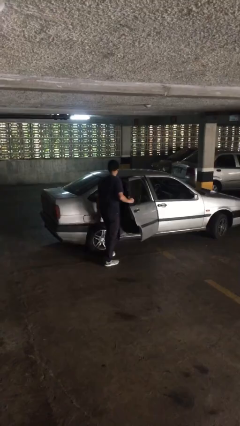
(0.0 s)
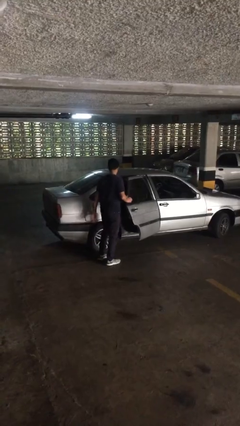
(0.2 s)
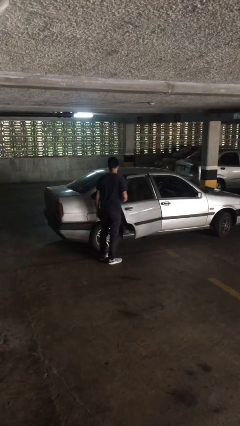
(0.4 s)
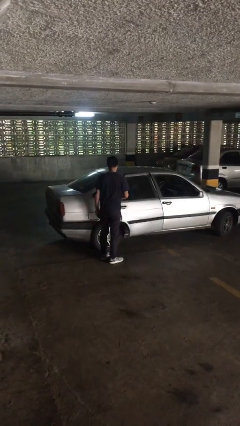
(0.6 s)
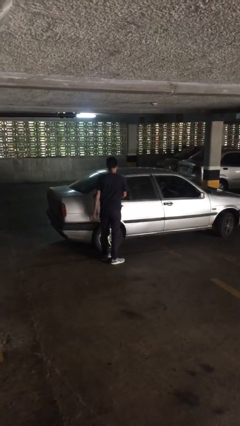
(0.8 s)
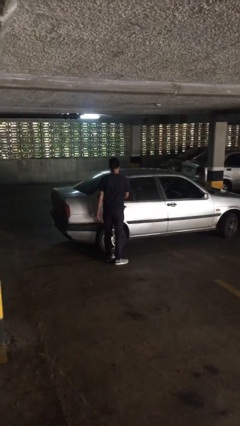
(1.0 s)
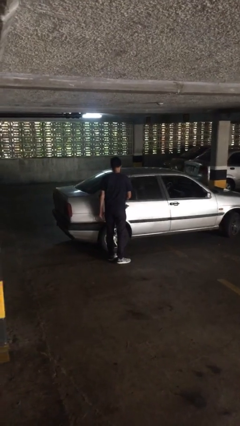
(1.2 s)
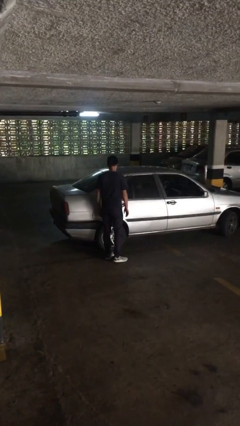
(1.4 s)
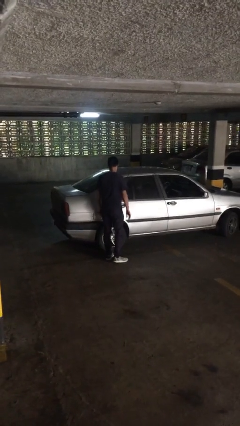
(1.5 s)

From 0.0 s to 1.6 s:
person closes car door

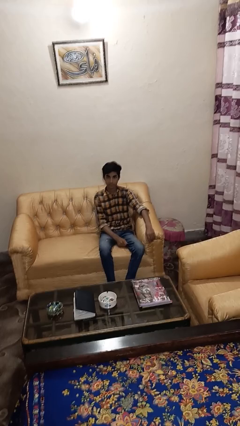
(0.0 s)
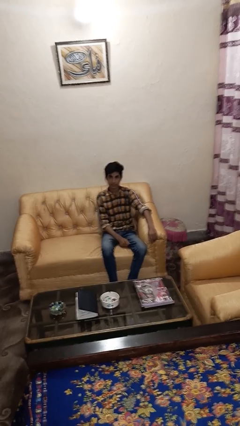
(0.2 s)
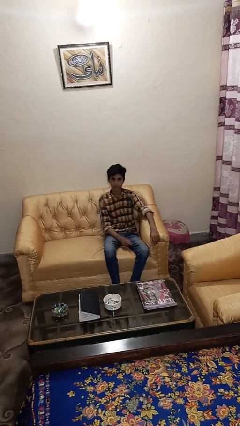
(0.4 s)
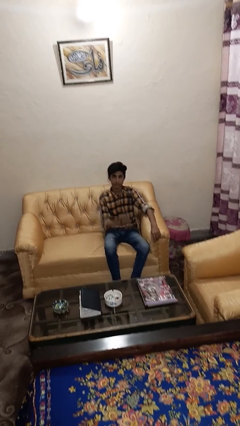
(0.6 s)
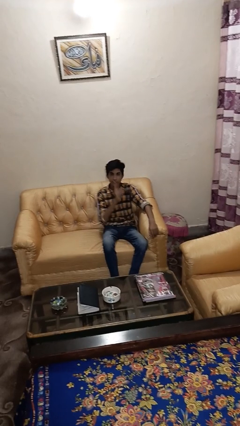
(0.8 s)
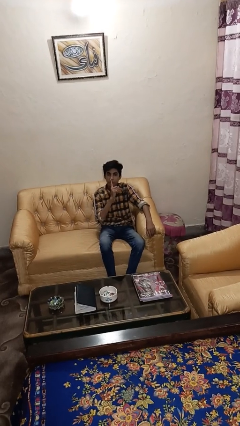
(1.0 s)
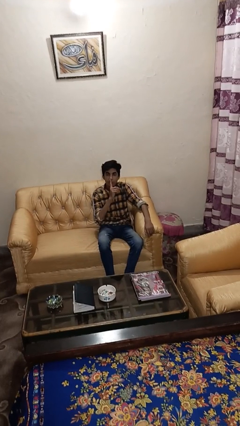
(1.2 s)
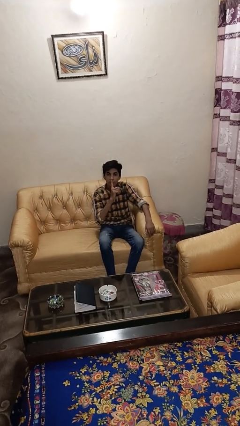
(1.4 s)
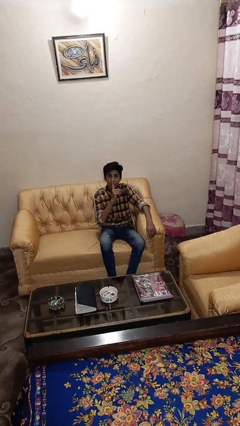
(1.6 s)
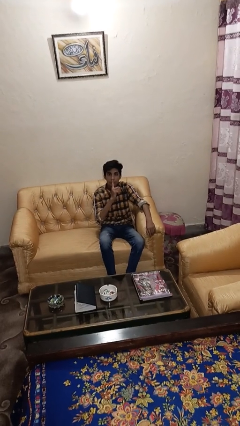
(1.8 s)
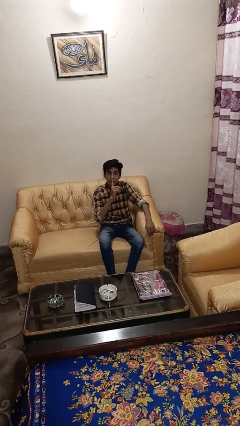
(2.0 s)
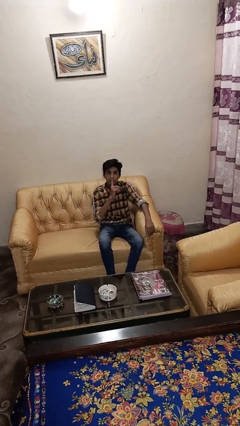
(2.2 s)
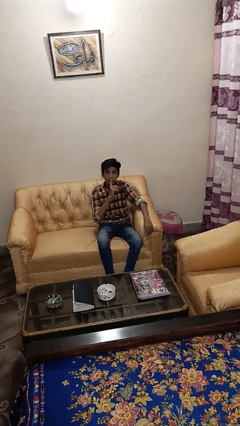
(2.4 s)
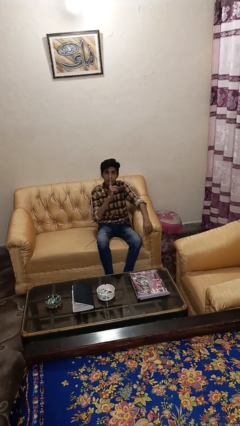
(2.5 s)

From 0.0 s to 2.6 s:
person gestures be quiet

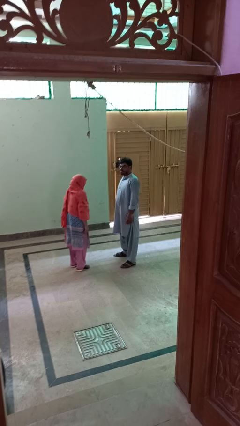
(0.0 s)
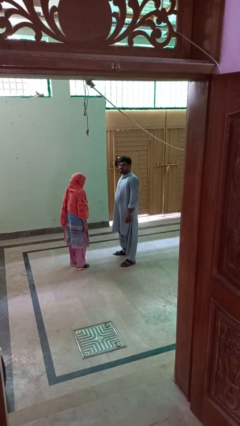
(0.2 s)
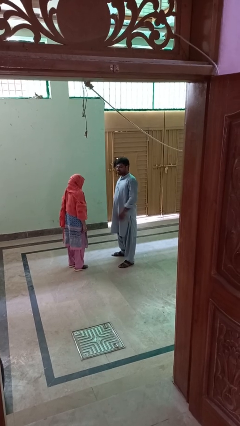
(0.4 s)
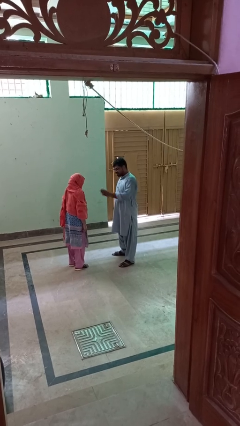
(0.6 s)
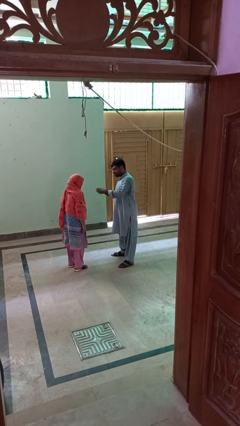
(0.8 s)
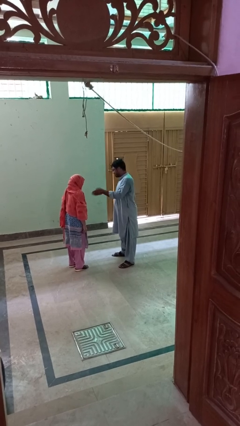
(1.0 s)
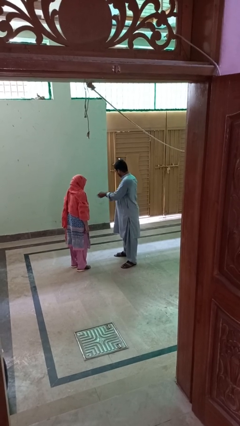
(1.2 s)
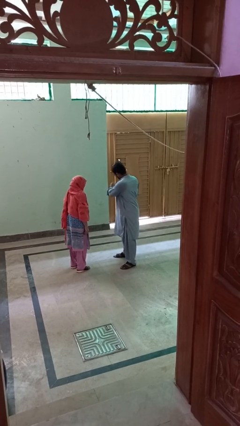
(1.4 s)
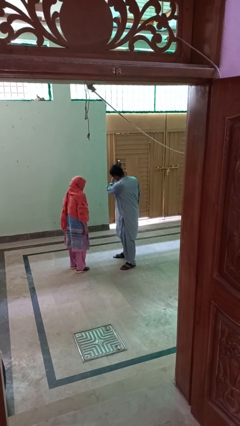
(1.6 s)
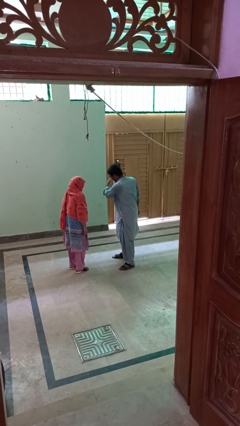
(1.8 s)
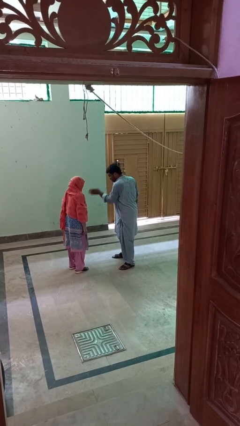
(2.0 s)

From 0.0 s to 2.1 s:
person shoves person

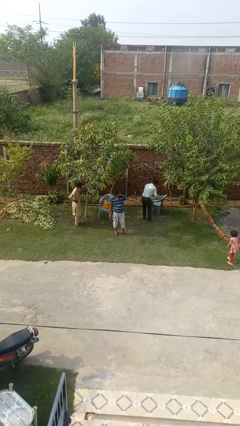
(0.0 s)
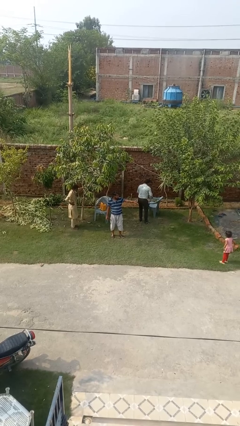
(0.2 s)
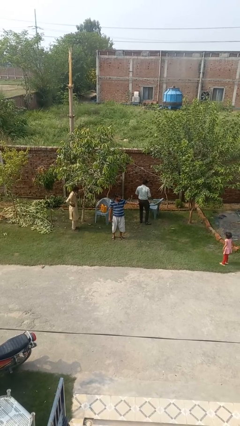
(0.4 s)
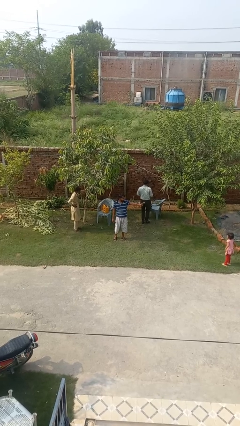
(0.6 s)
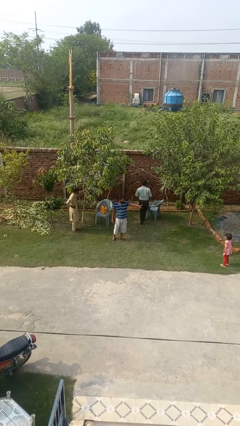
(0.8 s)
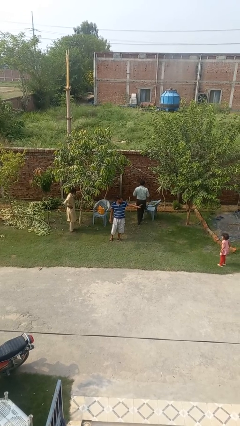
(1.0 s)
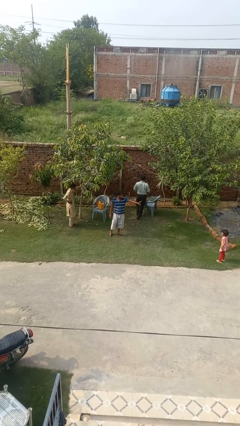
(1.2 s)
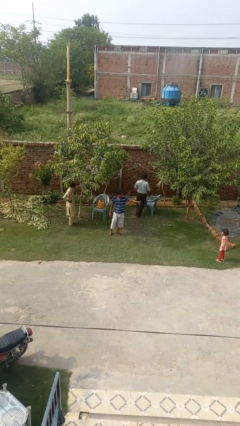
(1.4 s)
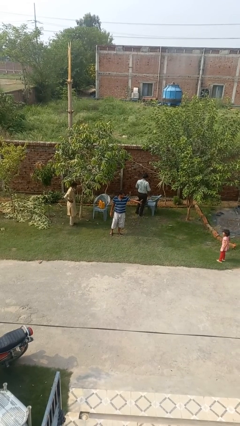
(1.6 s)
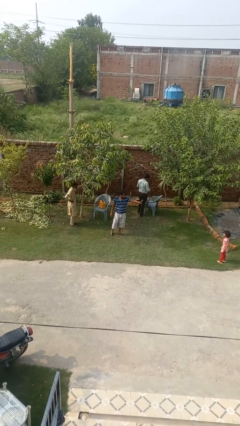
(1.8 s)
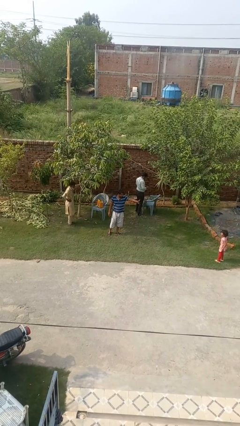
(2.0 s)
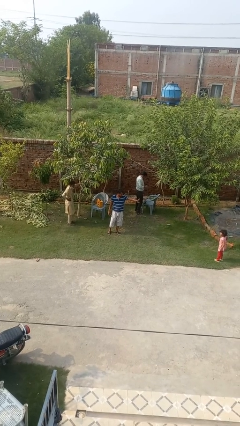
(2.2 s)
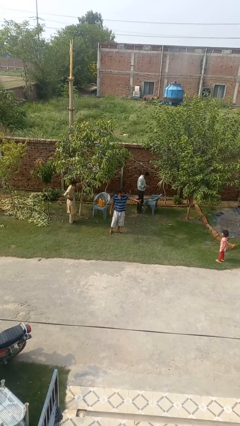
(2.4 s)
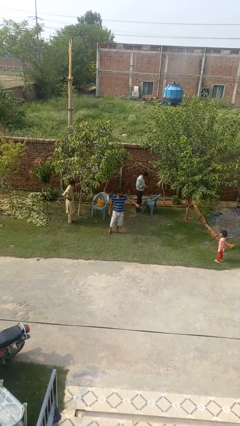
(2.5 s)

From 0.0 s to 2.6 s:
person waves at person

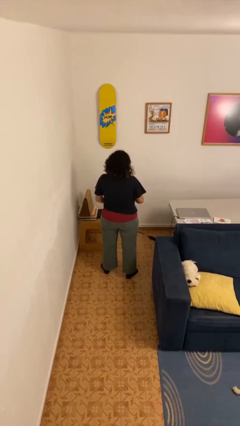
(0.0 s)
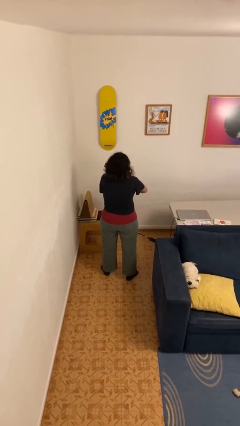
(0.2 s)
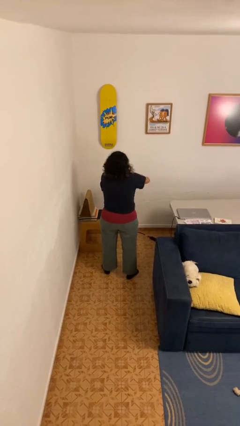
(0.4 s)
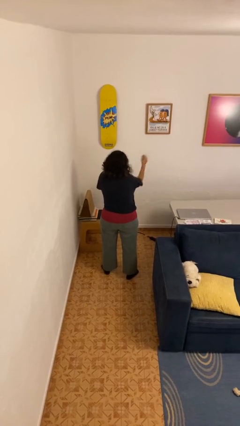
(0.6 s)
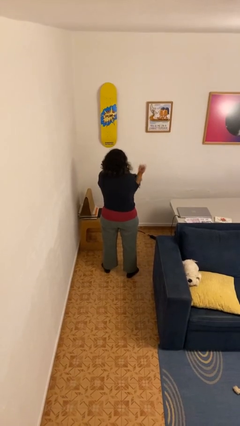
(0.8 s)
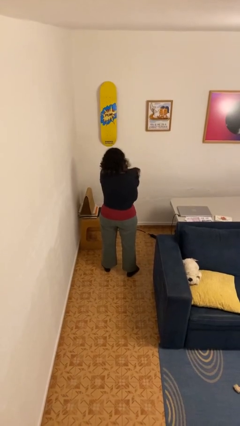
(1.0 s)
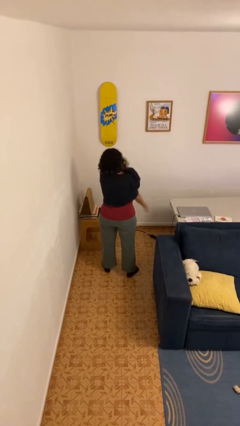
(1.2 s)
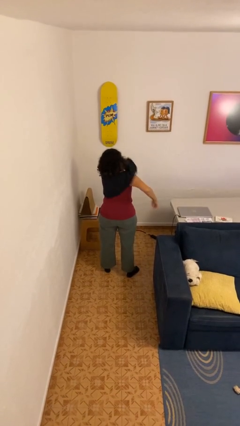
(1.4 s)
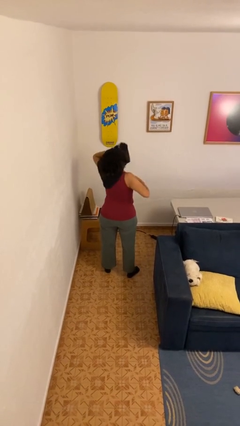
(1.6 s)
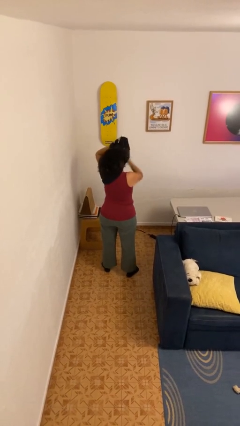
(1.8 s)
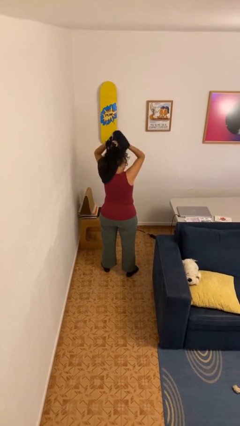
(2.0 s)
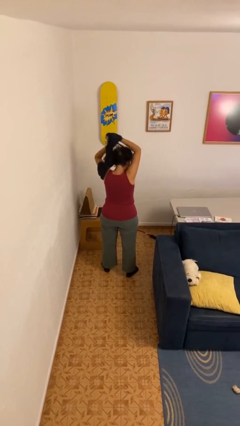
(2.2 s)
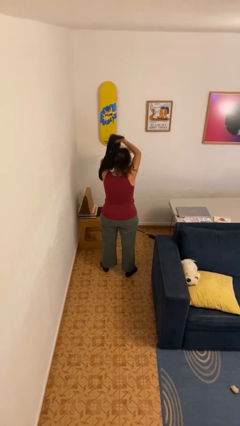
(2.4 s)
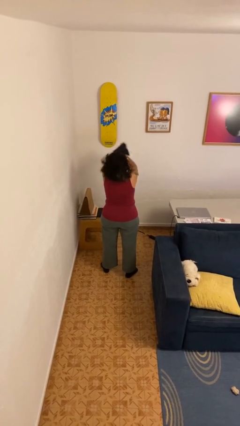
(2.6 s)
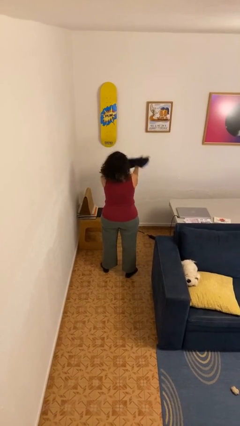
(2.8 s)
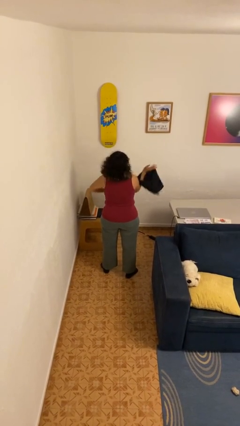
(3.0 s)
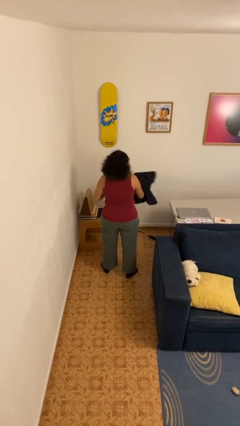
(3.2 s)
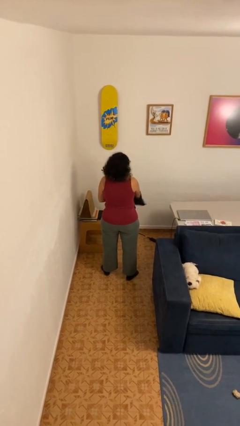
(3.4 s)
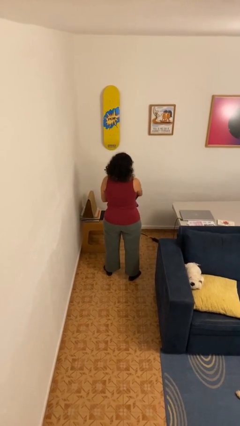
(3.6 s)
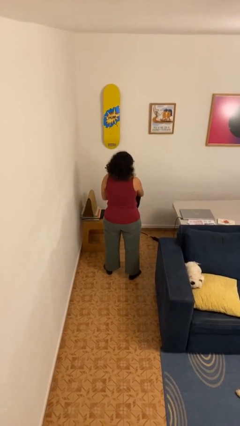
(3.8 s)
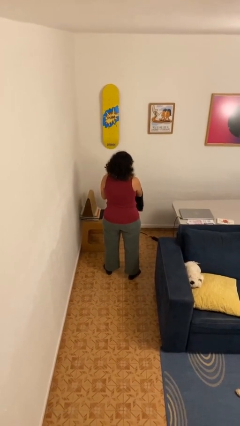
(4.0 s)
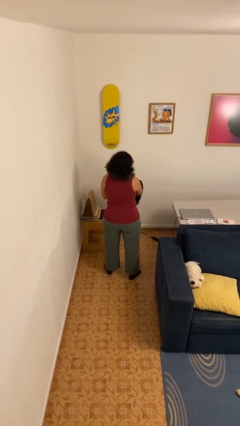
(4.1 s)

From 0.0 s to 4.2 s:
person takes off shirt

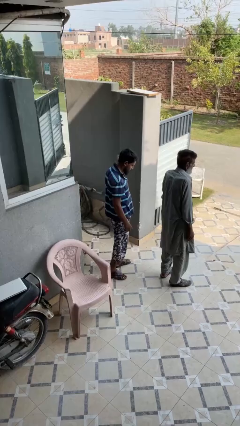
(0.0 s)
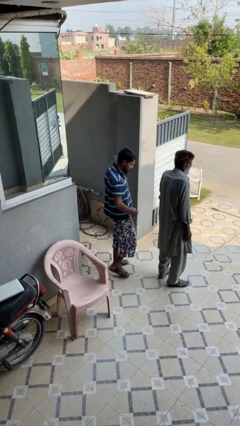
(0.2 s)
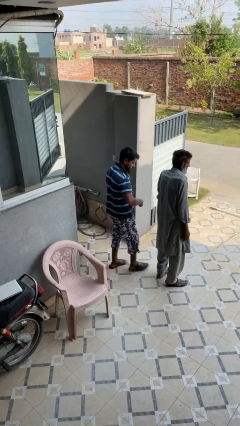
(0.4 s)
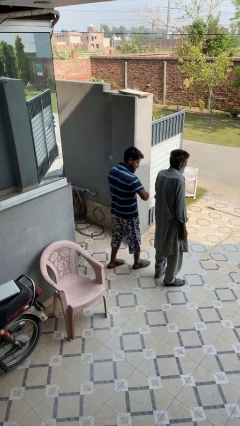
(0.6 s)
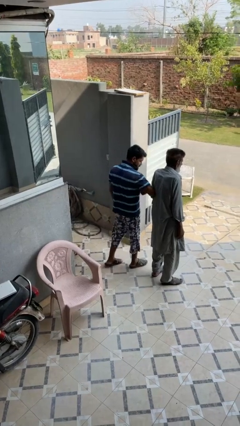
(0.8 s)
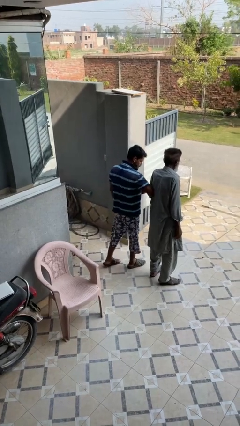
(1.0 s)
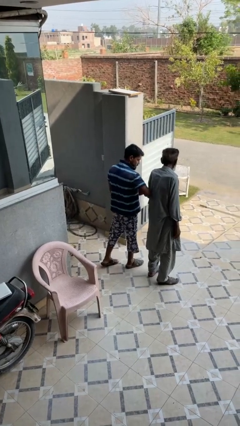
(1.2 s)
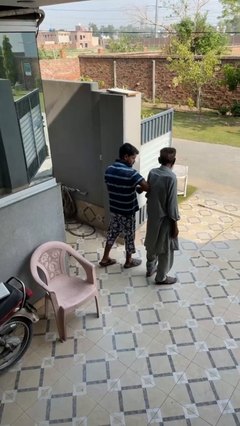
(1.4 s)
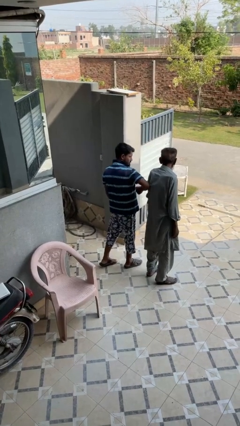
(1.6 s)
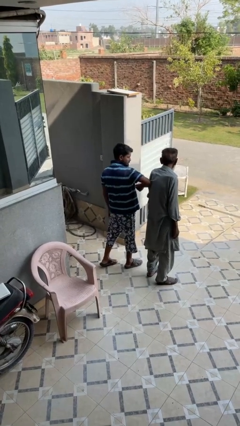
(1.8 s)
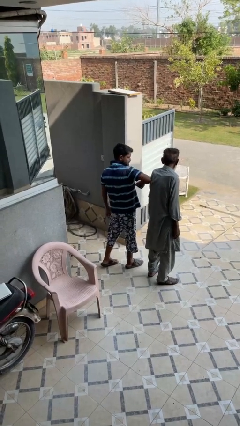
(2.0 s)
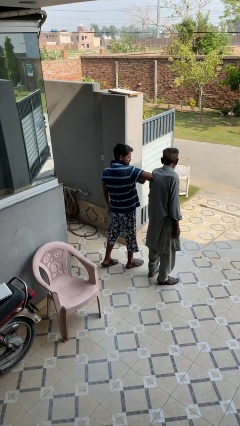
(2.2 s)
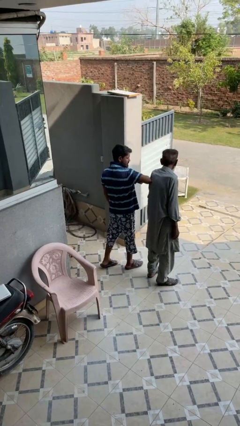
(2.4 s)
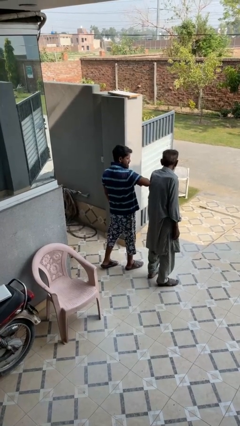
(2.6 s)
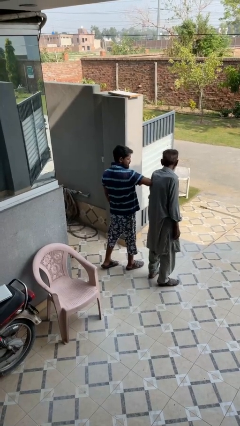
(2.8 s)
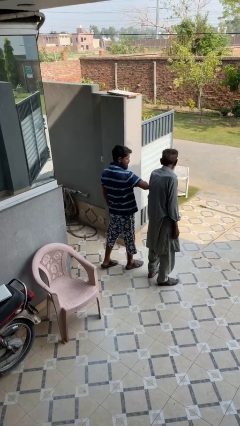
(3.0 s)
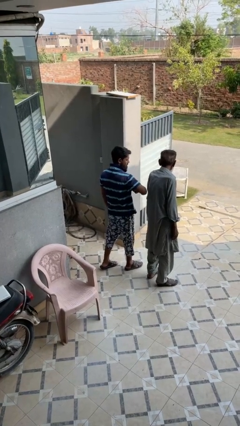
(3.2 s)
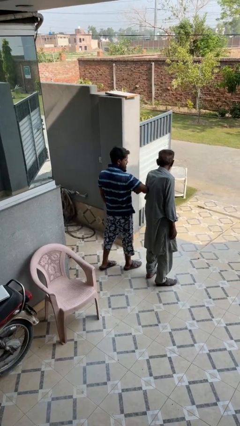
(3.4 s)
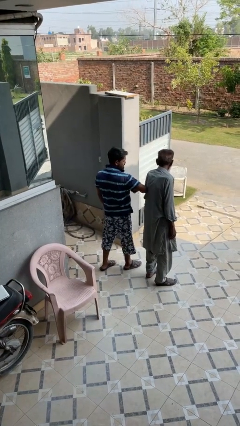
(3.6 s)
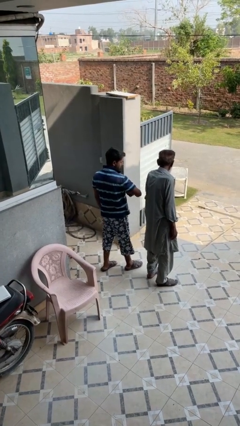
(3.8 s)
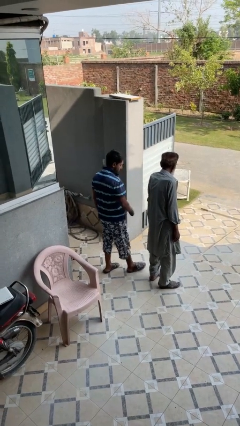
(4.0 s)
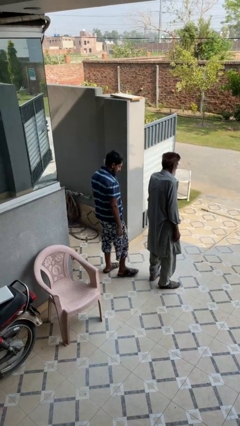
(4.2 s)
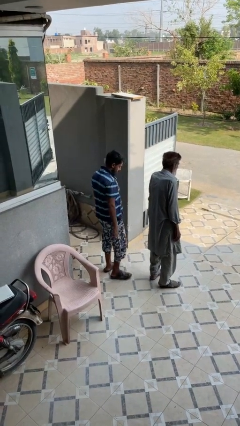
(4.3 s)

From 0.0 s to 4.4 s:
person nudges person with elbow
